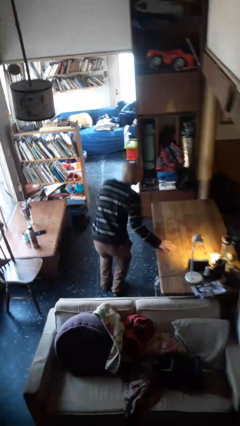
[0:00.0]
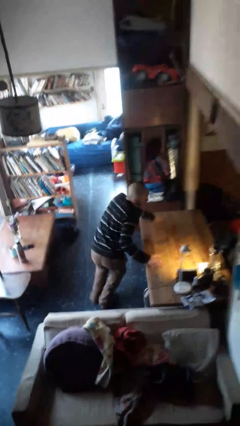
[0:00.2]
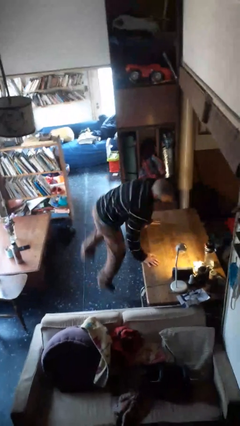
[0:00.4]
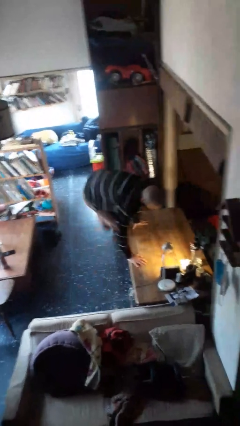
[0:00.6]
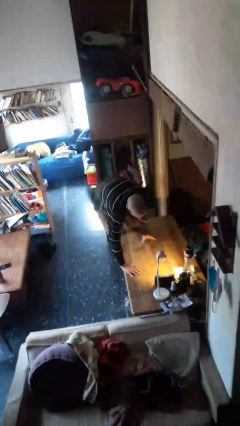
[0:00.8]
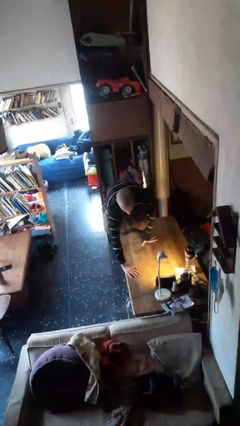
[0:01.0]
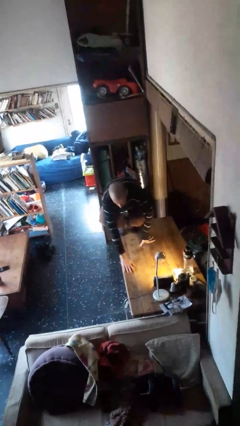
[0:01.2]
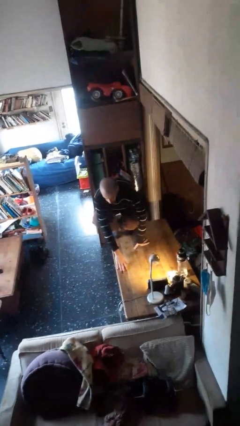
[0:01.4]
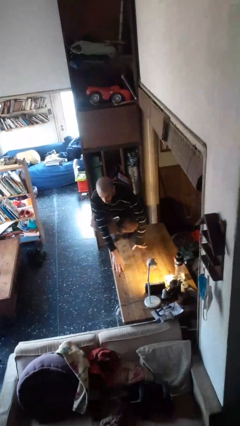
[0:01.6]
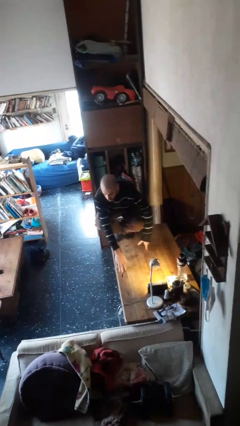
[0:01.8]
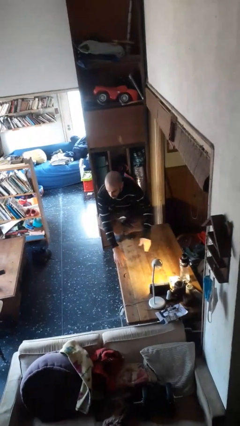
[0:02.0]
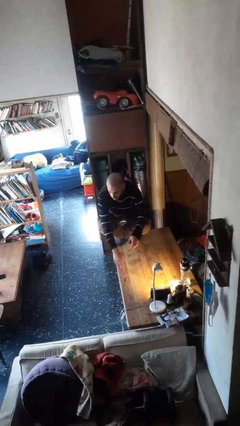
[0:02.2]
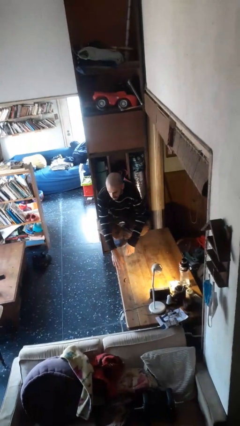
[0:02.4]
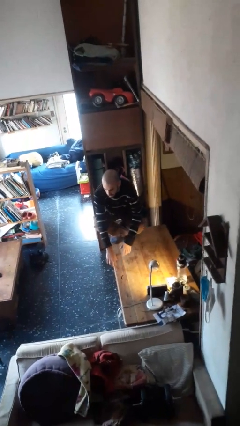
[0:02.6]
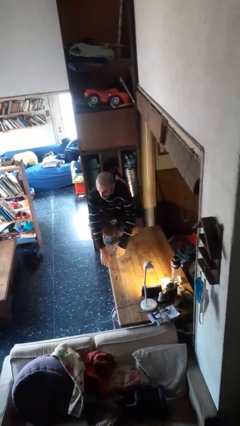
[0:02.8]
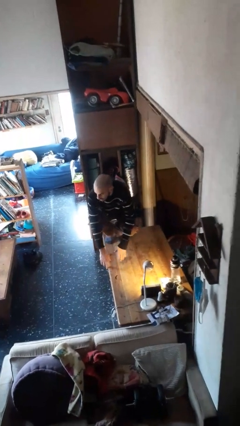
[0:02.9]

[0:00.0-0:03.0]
person climbs on table

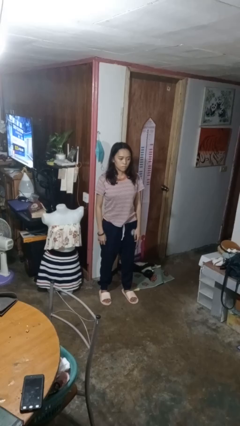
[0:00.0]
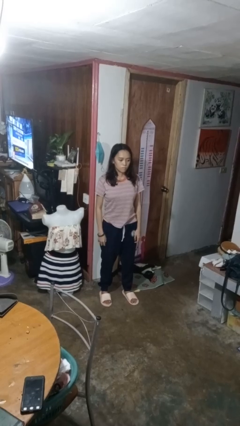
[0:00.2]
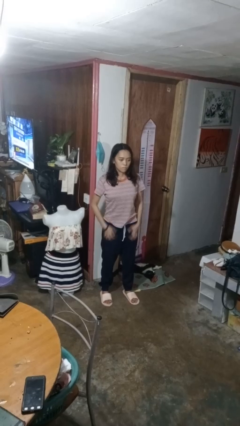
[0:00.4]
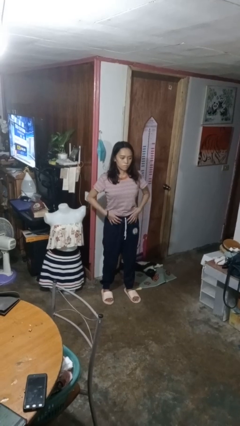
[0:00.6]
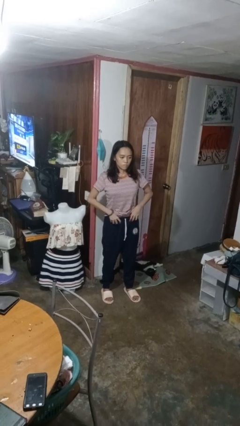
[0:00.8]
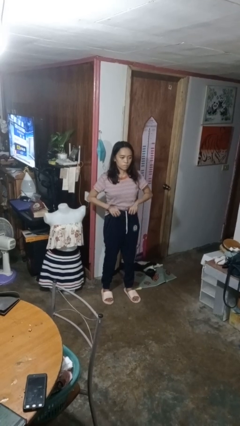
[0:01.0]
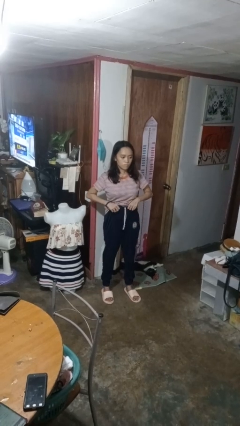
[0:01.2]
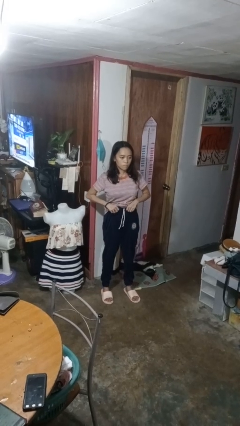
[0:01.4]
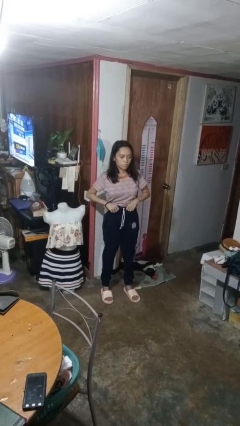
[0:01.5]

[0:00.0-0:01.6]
person hikes up pants

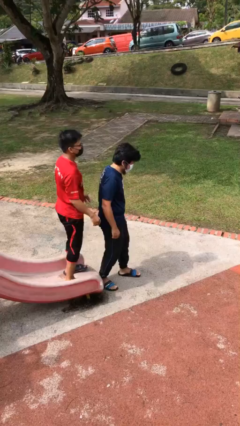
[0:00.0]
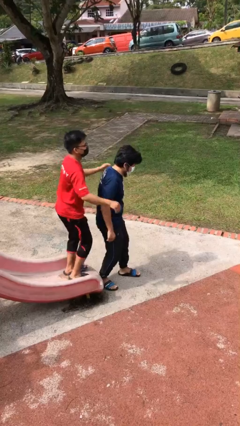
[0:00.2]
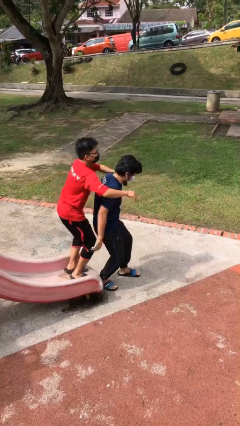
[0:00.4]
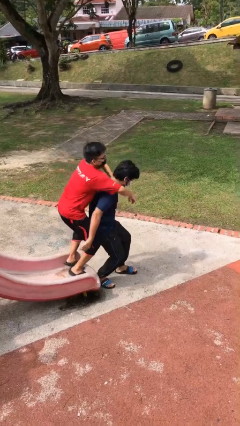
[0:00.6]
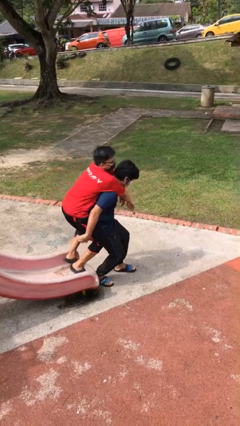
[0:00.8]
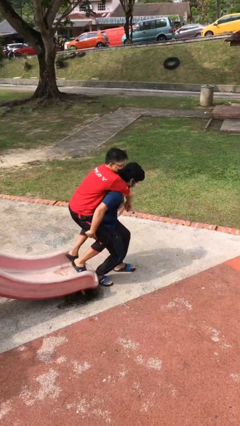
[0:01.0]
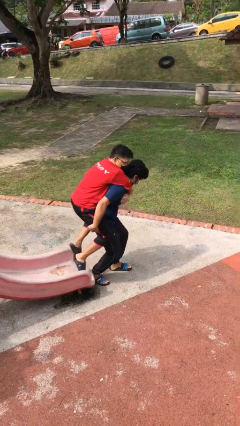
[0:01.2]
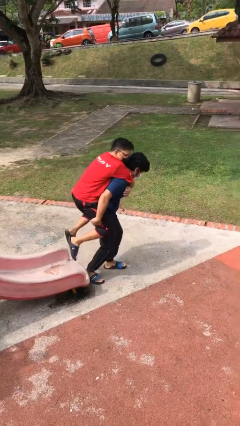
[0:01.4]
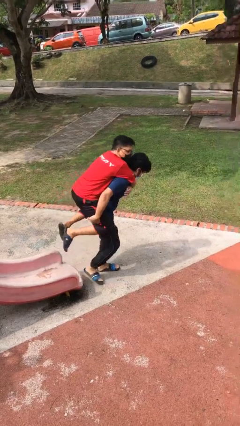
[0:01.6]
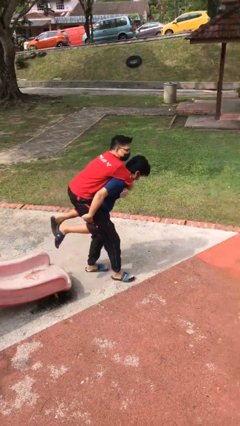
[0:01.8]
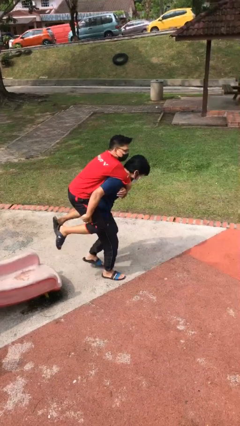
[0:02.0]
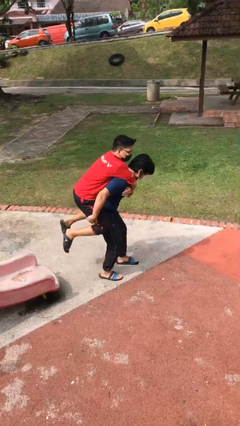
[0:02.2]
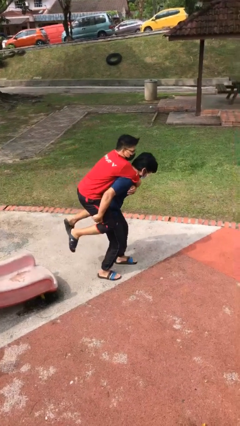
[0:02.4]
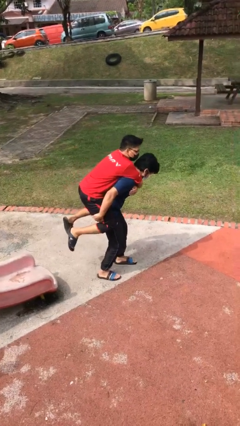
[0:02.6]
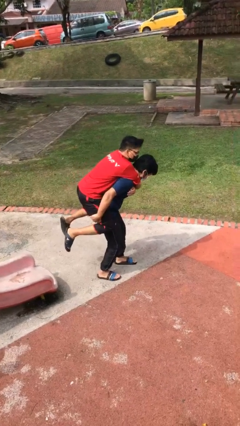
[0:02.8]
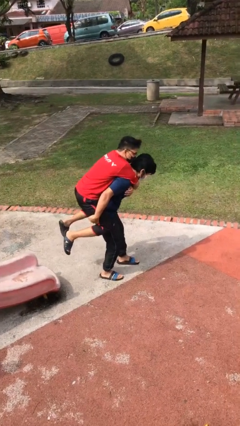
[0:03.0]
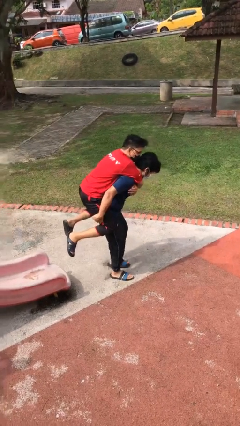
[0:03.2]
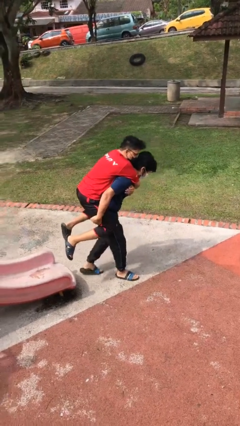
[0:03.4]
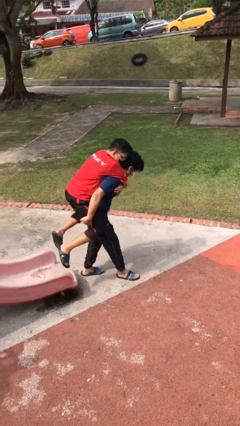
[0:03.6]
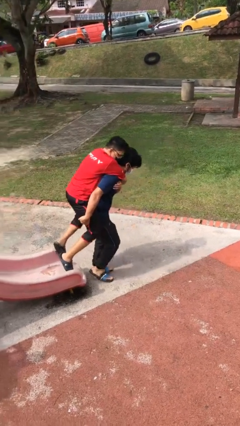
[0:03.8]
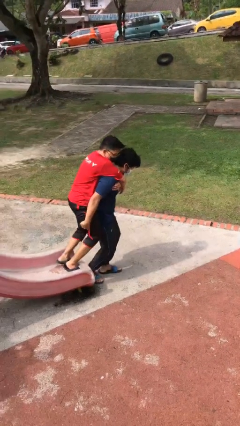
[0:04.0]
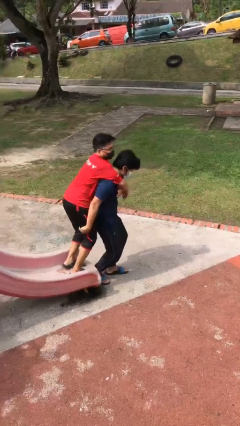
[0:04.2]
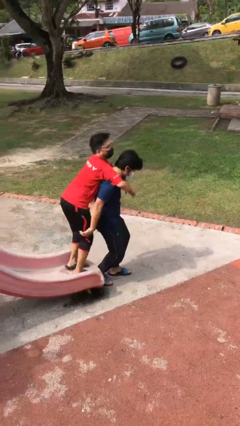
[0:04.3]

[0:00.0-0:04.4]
person carries person on back

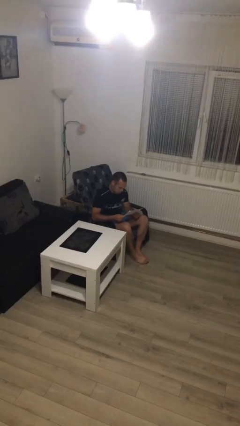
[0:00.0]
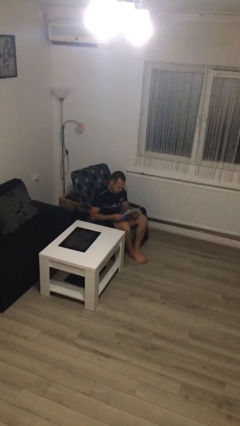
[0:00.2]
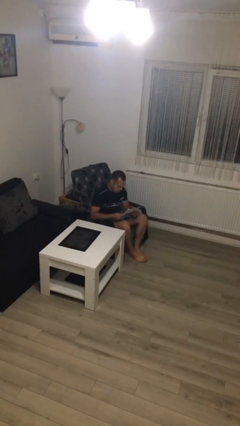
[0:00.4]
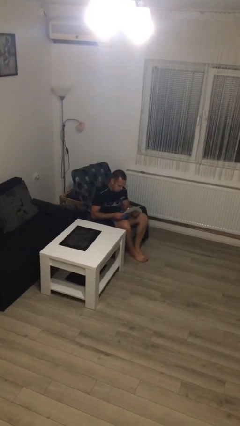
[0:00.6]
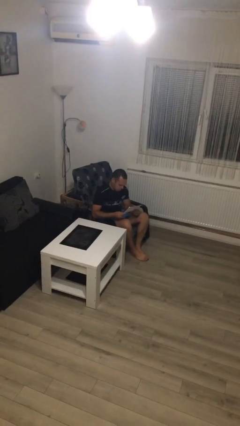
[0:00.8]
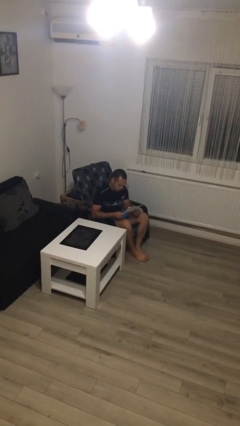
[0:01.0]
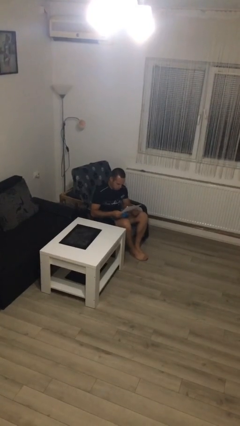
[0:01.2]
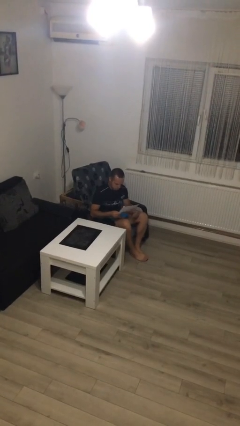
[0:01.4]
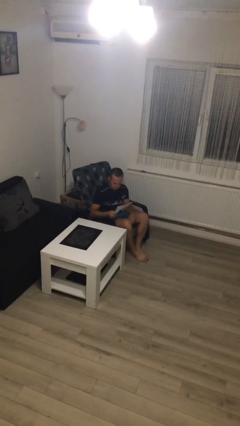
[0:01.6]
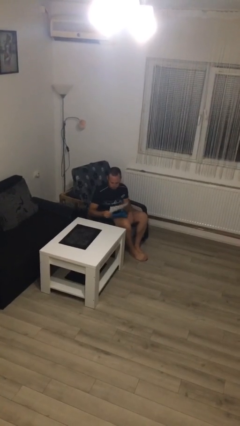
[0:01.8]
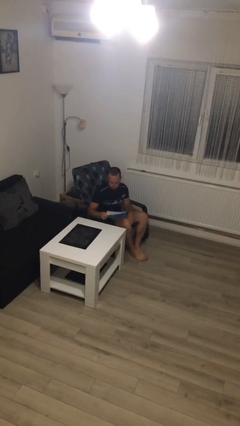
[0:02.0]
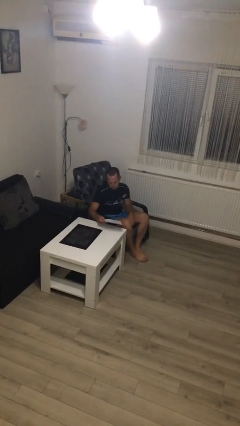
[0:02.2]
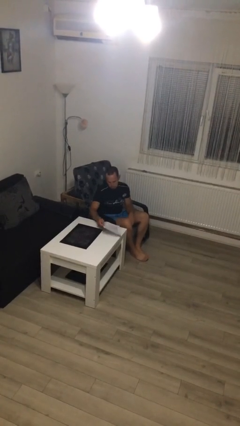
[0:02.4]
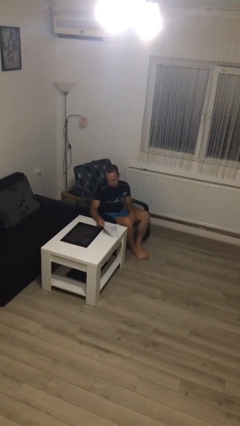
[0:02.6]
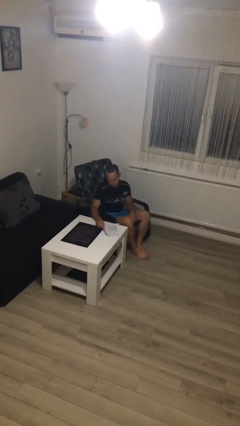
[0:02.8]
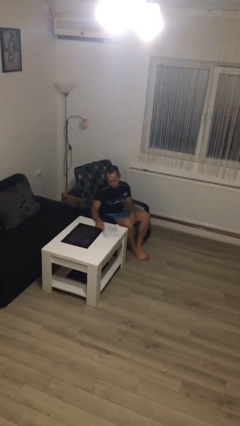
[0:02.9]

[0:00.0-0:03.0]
person reads document

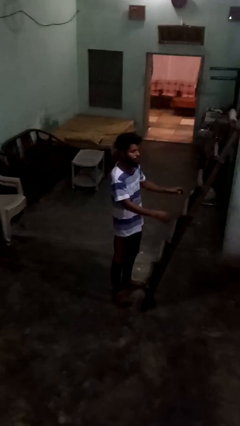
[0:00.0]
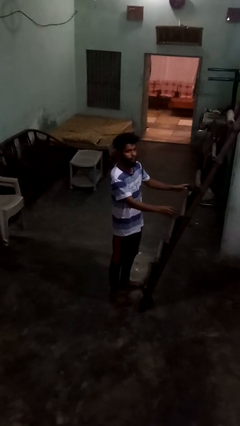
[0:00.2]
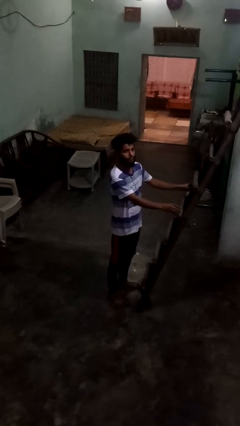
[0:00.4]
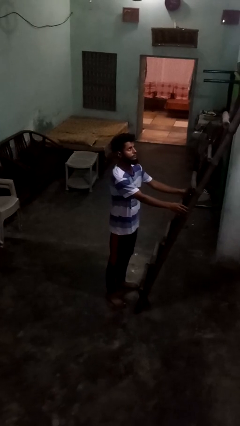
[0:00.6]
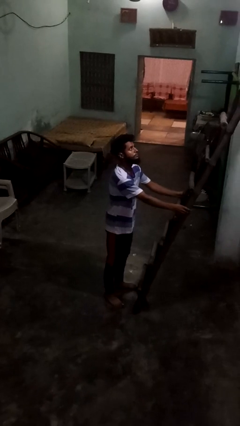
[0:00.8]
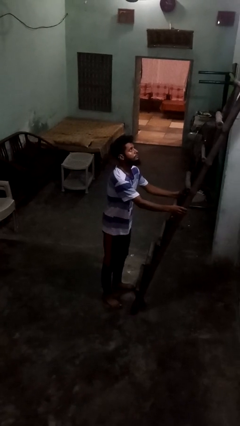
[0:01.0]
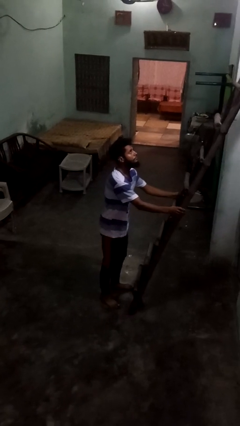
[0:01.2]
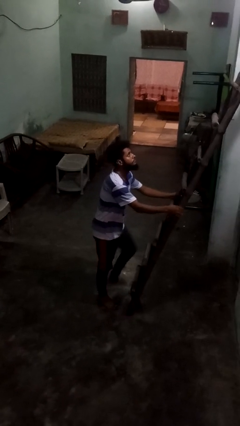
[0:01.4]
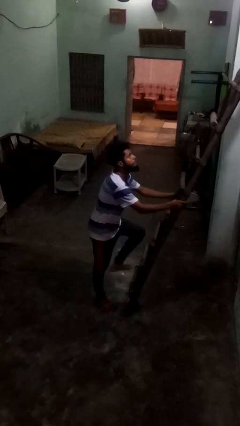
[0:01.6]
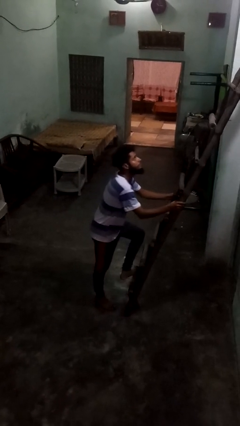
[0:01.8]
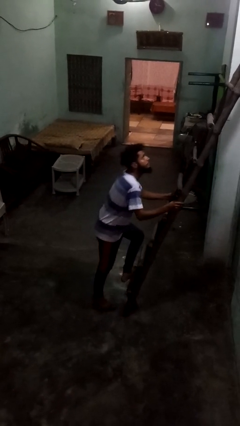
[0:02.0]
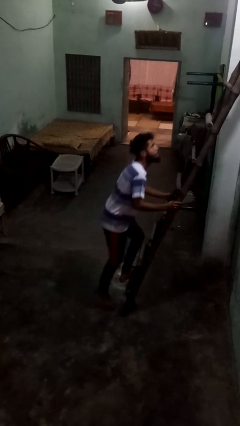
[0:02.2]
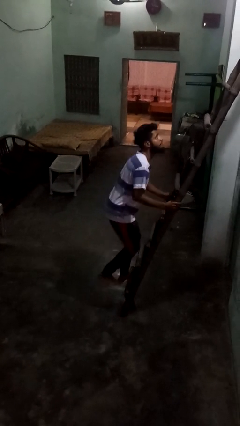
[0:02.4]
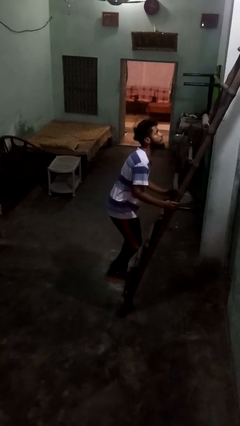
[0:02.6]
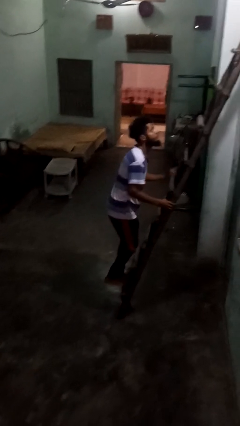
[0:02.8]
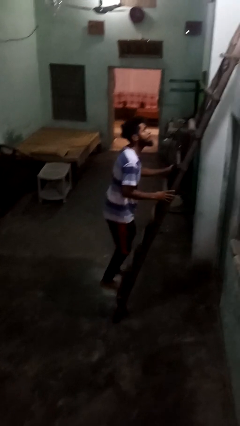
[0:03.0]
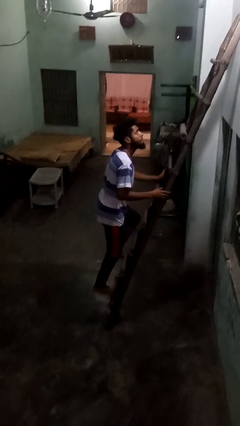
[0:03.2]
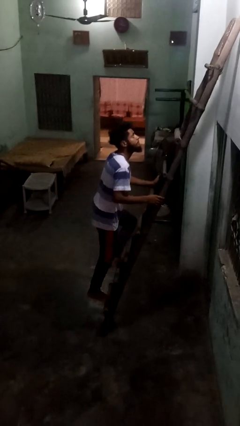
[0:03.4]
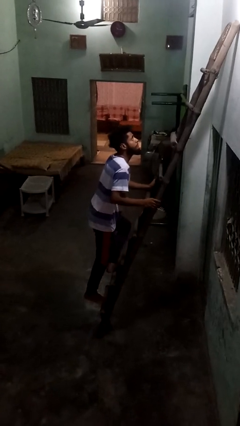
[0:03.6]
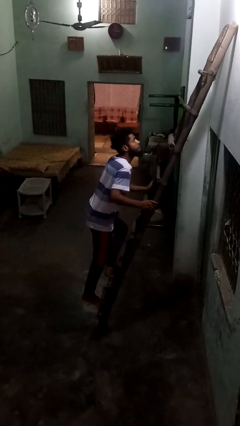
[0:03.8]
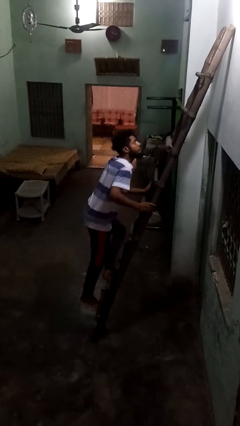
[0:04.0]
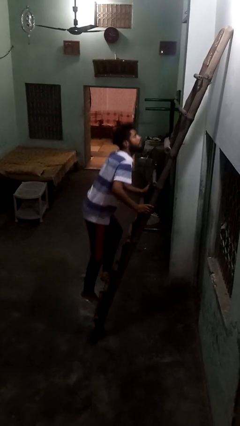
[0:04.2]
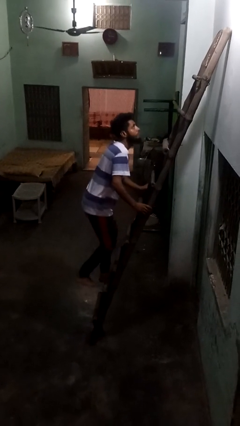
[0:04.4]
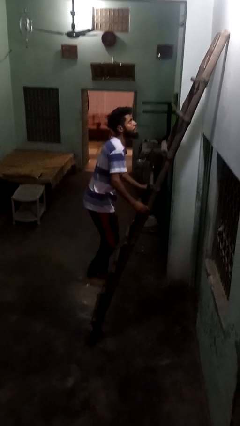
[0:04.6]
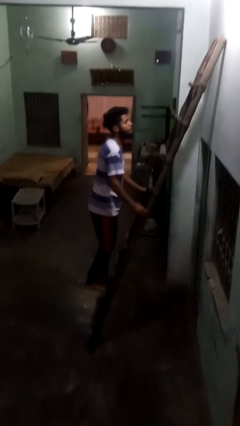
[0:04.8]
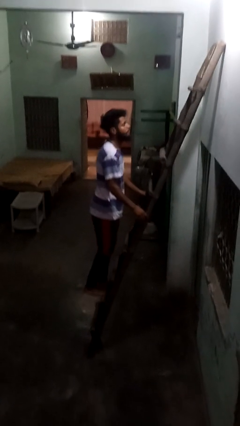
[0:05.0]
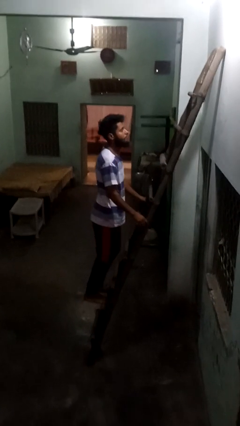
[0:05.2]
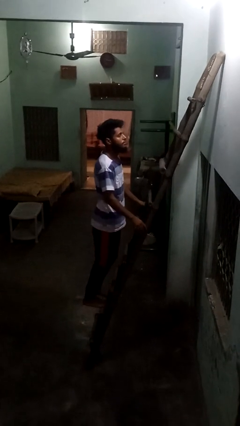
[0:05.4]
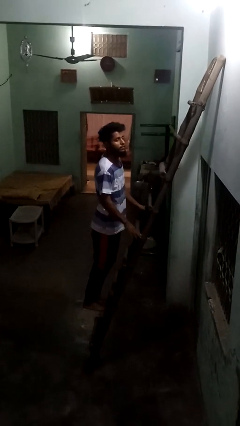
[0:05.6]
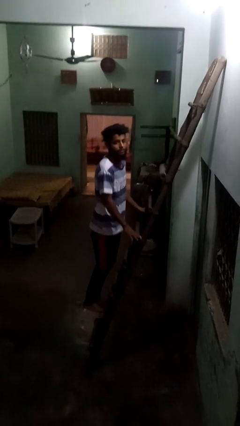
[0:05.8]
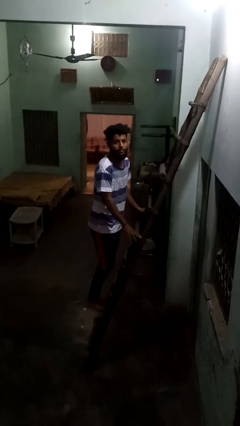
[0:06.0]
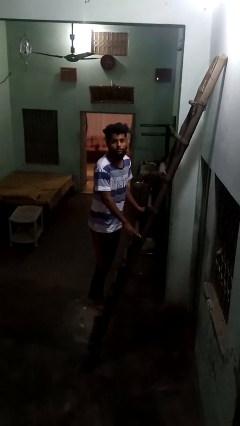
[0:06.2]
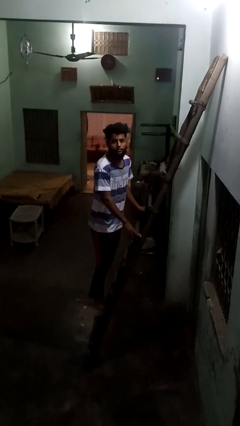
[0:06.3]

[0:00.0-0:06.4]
person climbs up ladder
